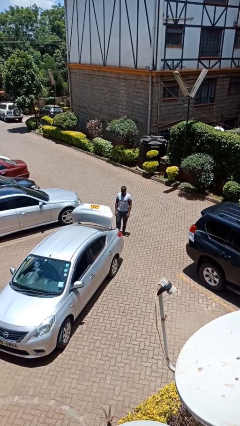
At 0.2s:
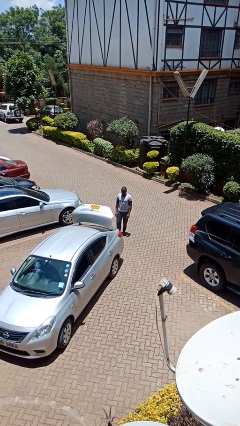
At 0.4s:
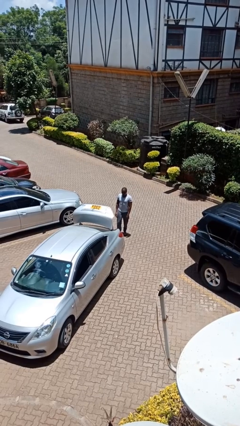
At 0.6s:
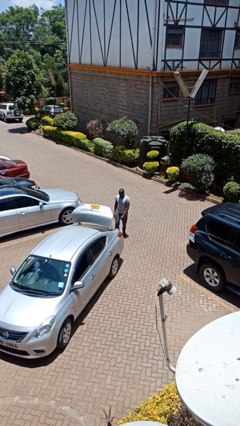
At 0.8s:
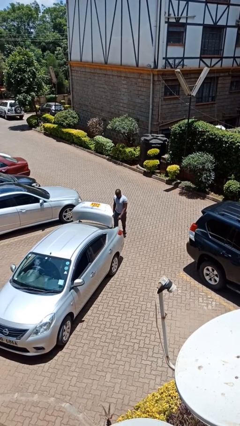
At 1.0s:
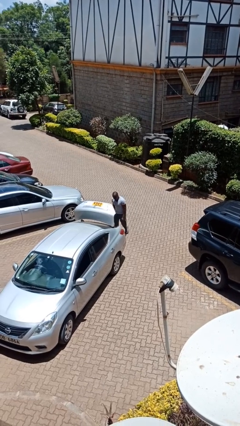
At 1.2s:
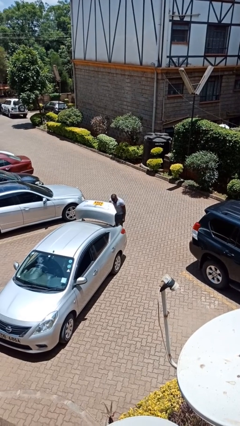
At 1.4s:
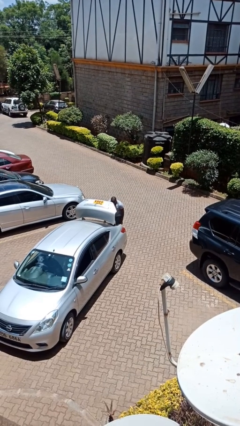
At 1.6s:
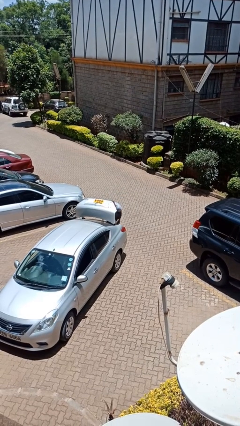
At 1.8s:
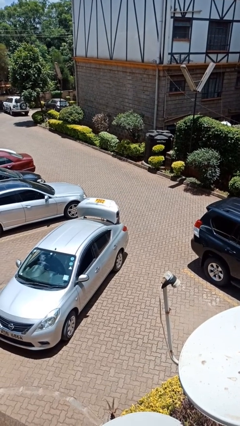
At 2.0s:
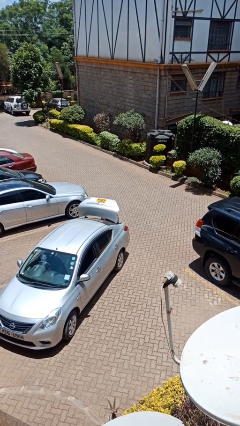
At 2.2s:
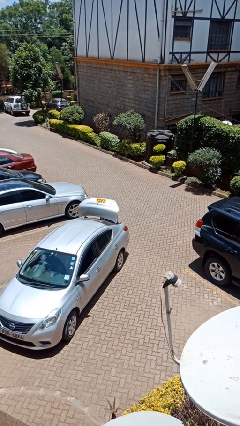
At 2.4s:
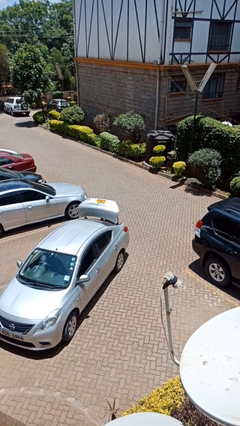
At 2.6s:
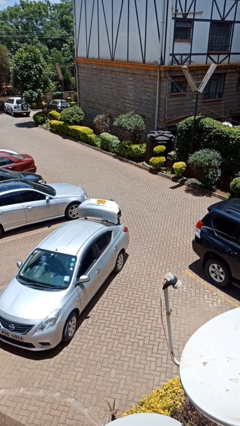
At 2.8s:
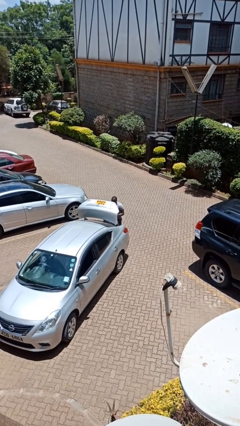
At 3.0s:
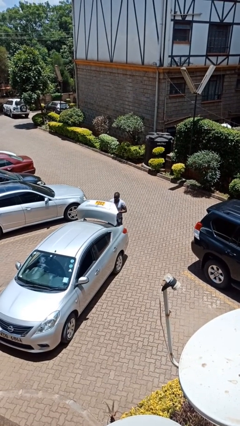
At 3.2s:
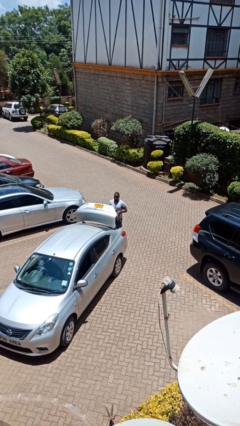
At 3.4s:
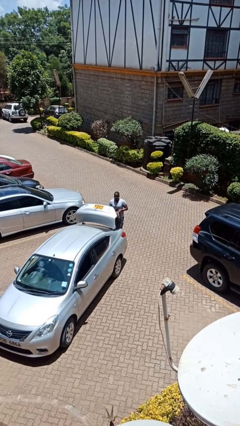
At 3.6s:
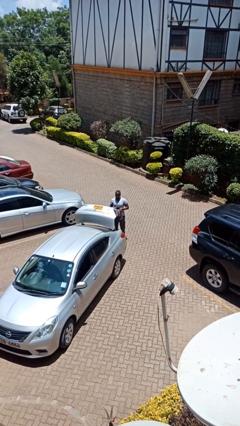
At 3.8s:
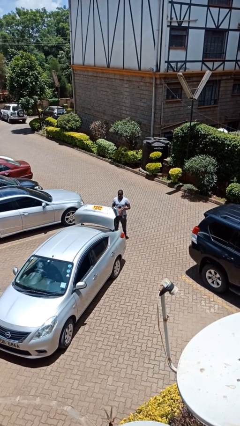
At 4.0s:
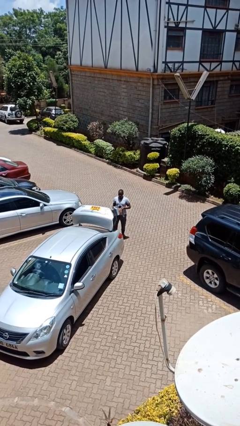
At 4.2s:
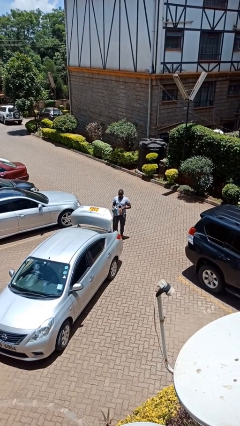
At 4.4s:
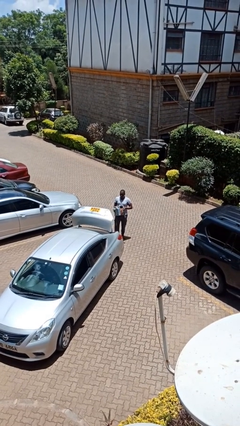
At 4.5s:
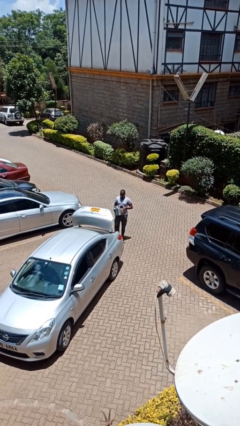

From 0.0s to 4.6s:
person unloads car

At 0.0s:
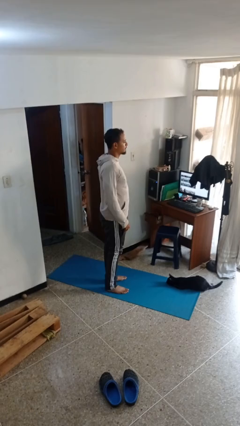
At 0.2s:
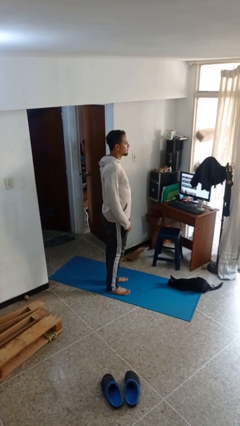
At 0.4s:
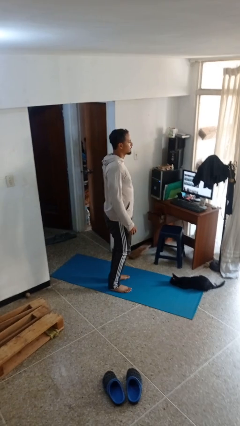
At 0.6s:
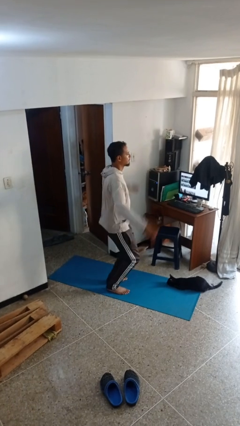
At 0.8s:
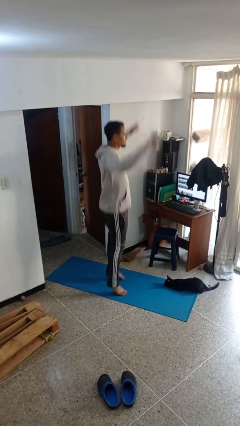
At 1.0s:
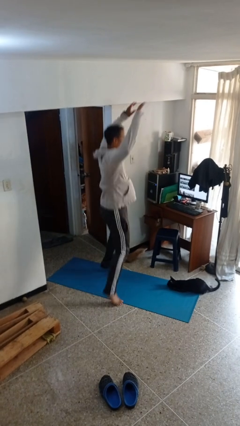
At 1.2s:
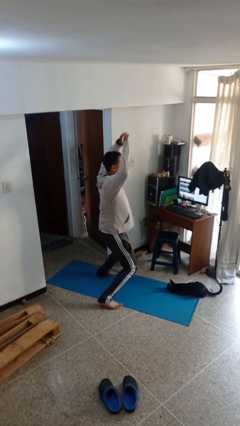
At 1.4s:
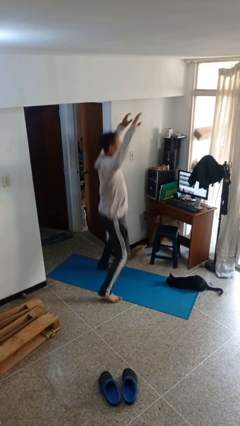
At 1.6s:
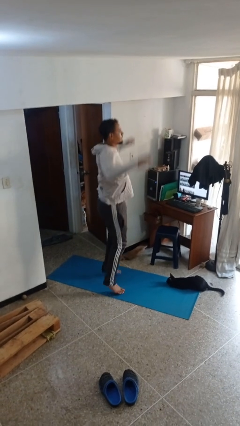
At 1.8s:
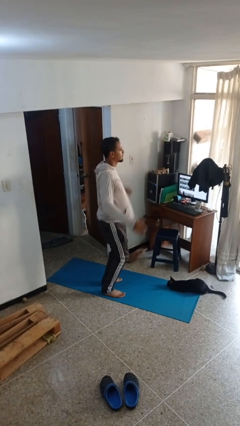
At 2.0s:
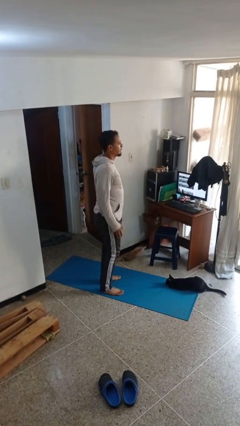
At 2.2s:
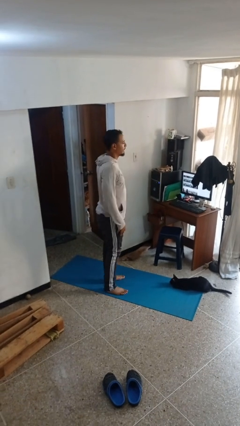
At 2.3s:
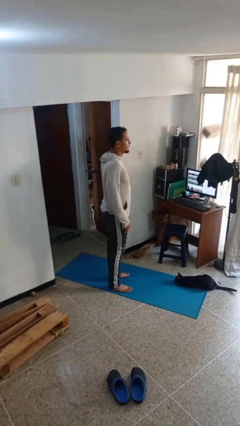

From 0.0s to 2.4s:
person exercises with jumping jacks

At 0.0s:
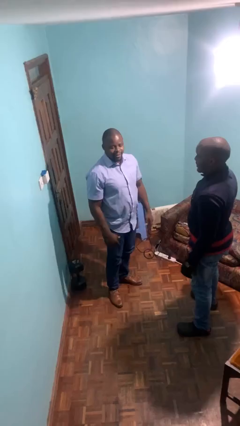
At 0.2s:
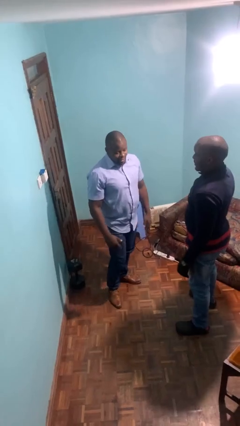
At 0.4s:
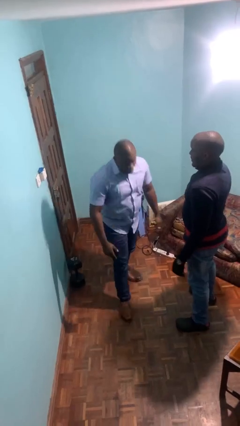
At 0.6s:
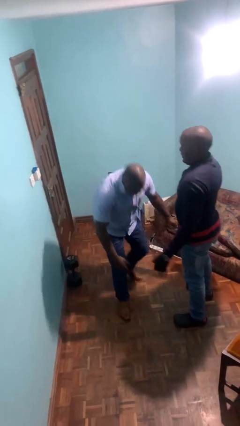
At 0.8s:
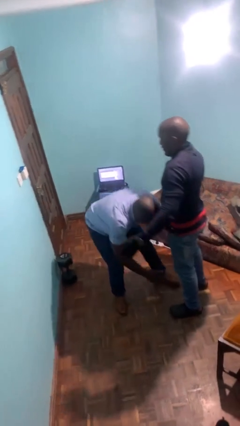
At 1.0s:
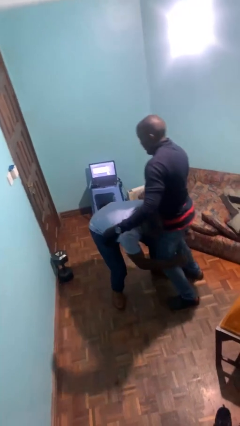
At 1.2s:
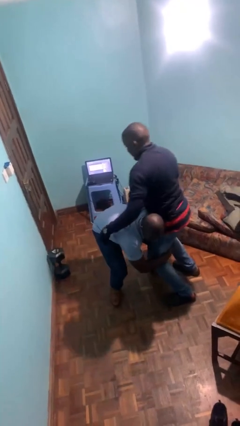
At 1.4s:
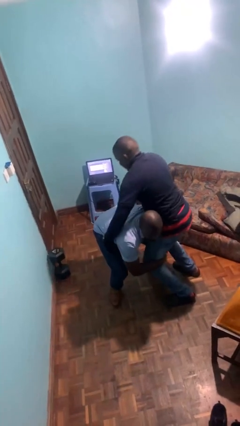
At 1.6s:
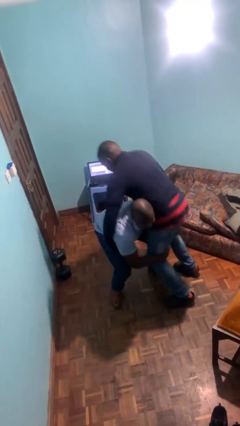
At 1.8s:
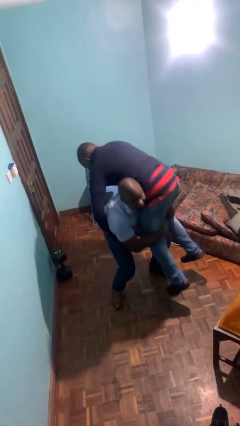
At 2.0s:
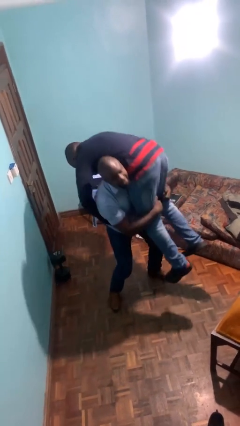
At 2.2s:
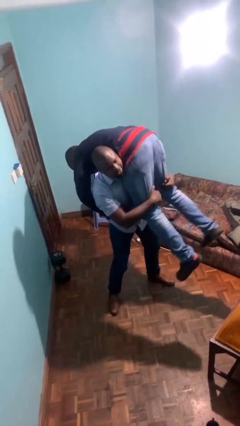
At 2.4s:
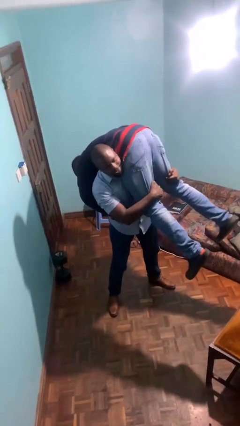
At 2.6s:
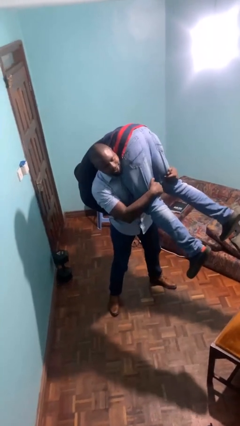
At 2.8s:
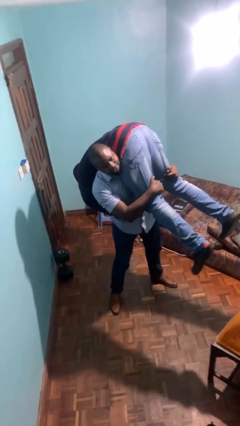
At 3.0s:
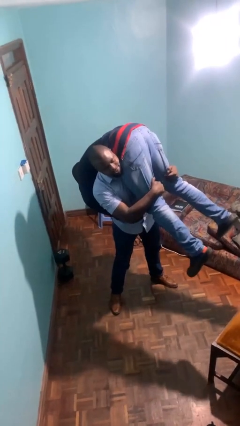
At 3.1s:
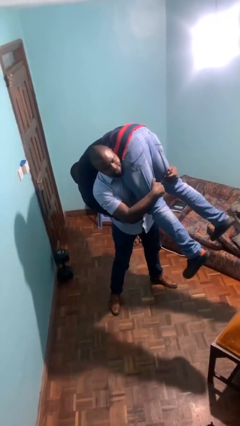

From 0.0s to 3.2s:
person carries person over shoulder

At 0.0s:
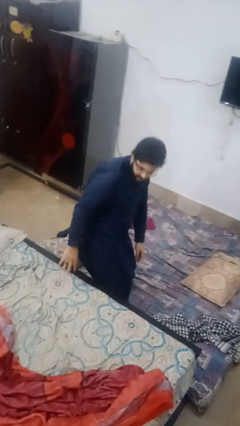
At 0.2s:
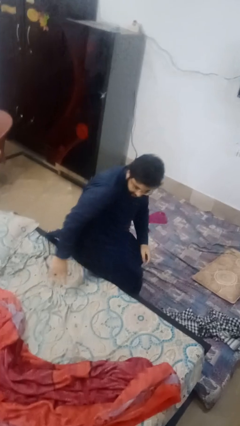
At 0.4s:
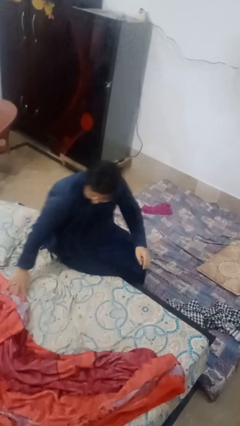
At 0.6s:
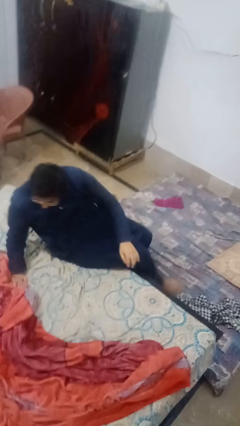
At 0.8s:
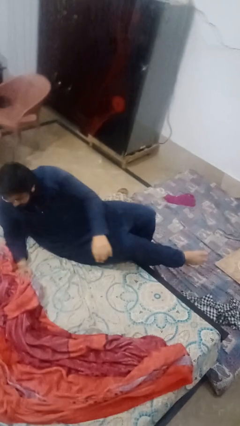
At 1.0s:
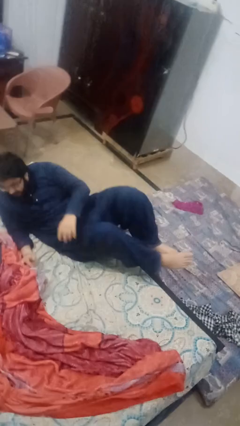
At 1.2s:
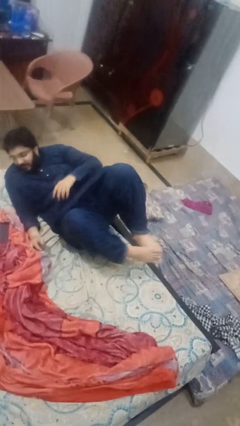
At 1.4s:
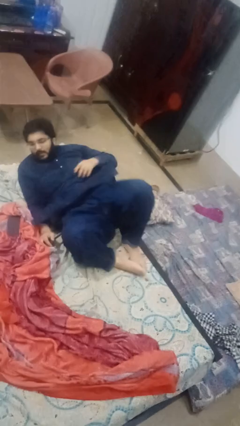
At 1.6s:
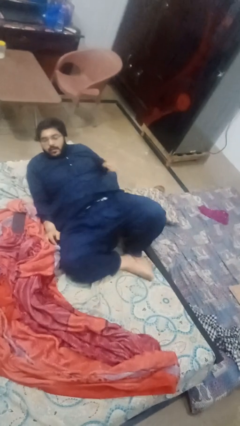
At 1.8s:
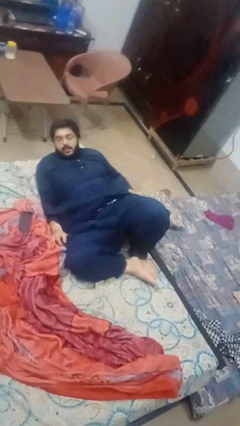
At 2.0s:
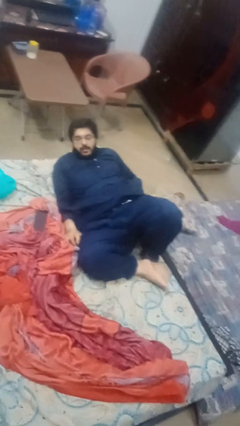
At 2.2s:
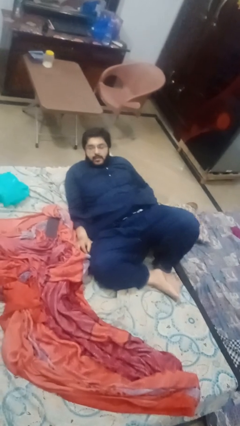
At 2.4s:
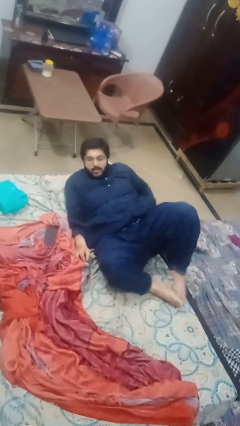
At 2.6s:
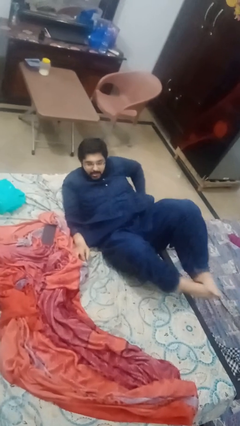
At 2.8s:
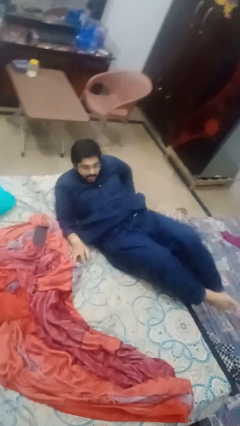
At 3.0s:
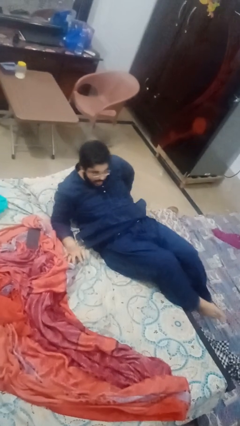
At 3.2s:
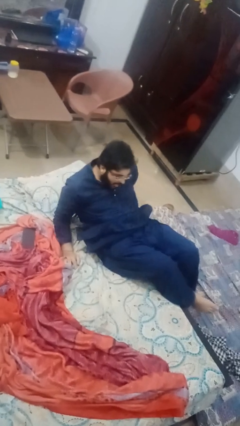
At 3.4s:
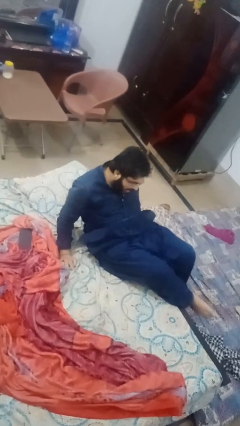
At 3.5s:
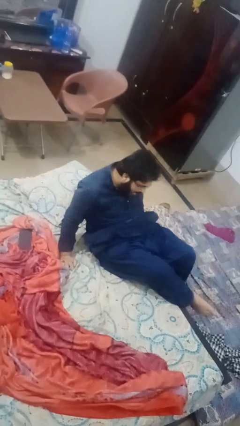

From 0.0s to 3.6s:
person lies down on bed

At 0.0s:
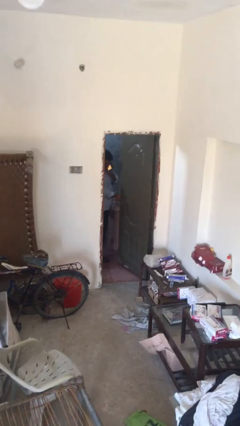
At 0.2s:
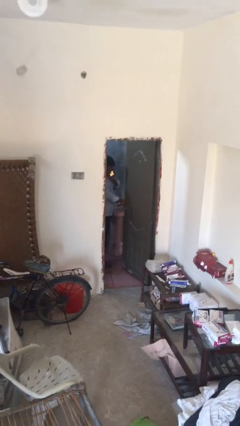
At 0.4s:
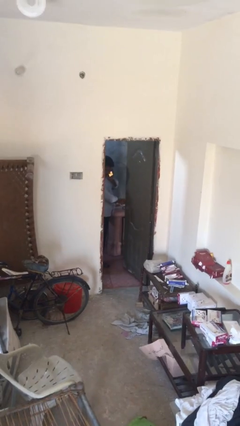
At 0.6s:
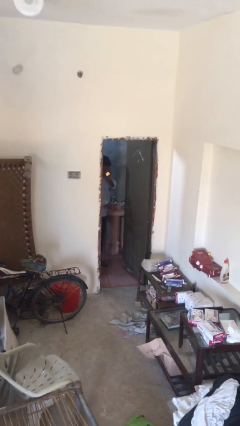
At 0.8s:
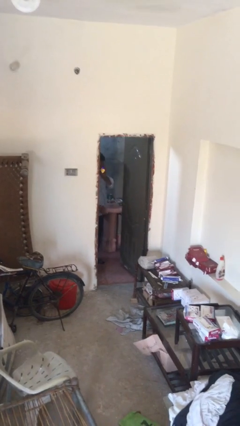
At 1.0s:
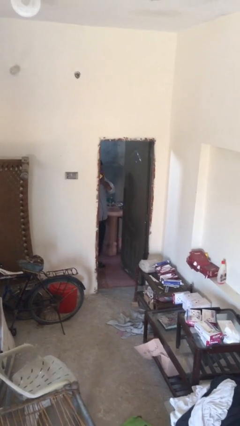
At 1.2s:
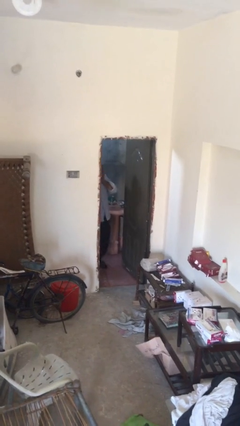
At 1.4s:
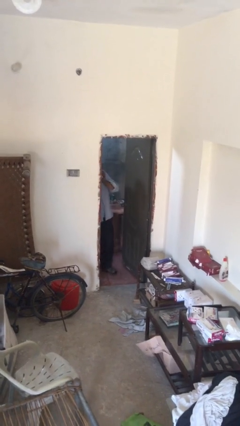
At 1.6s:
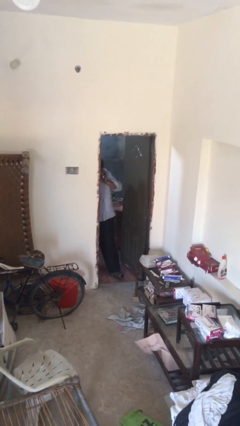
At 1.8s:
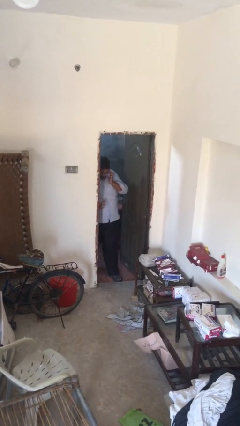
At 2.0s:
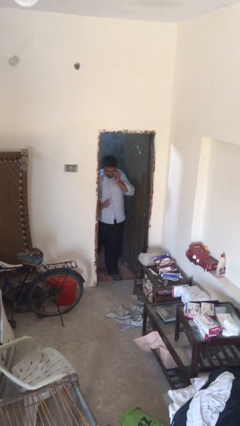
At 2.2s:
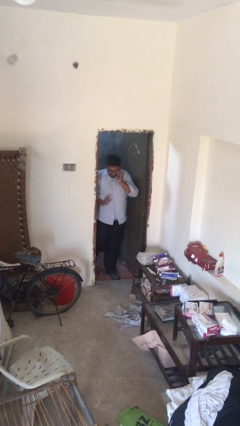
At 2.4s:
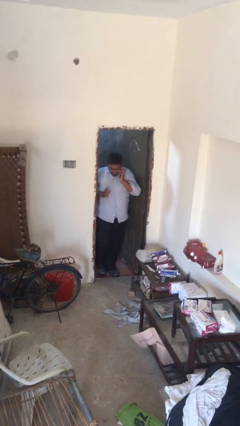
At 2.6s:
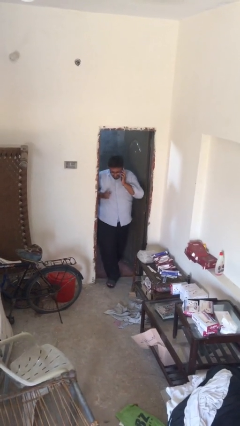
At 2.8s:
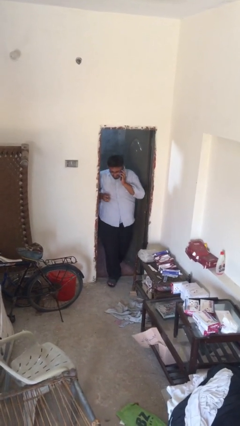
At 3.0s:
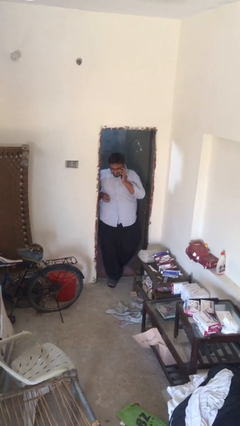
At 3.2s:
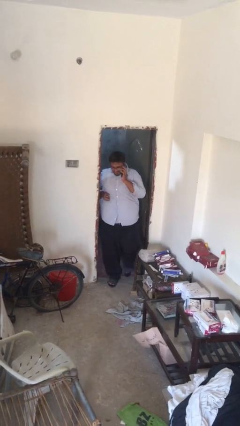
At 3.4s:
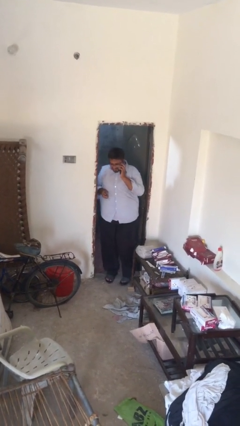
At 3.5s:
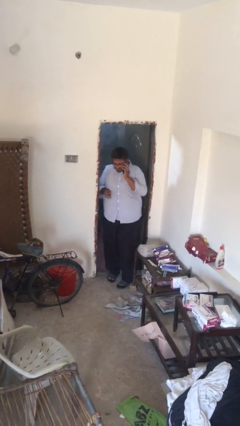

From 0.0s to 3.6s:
person enters scene through structure

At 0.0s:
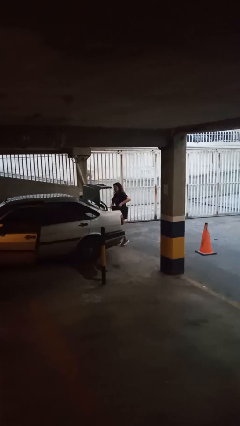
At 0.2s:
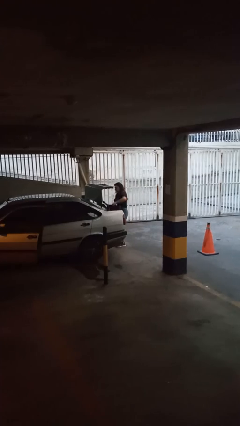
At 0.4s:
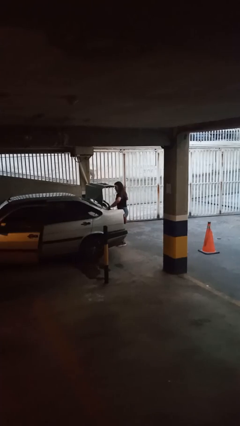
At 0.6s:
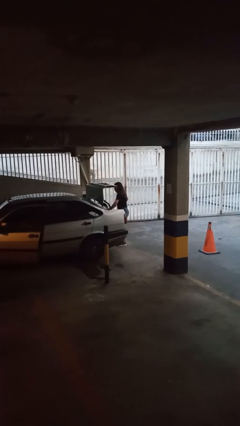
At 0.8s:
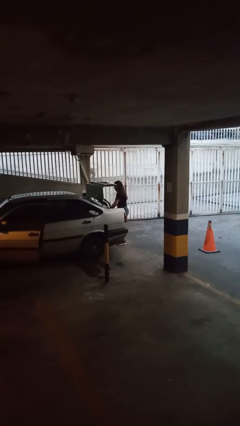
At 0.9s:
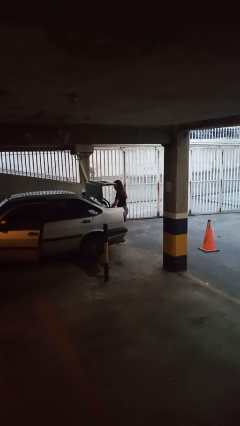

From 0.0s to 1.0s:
person loads car
